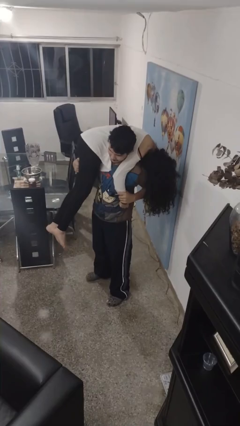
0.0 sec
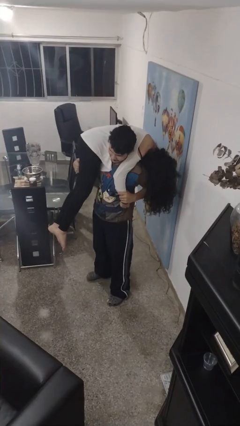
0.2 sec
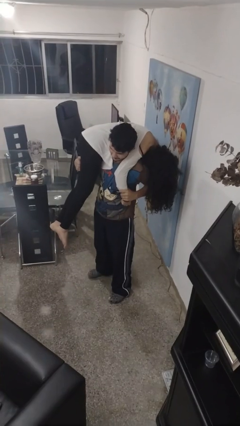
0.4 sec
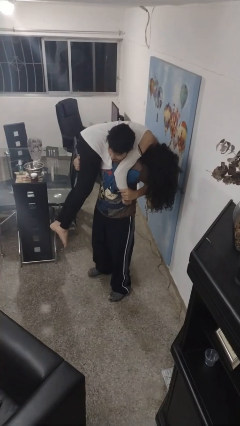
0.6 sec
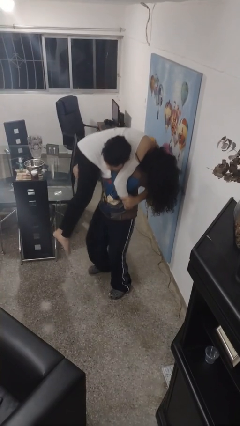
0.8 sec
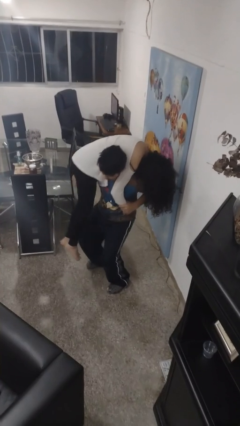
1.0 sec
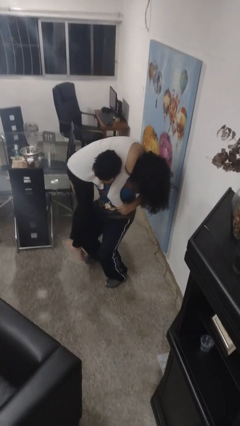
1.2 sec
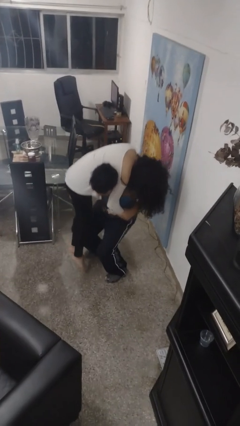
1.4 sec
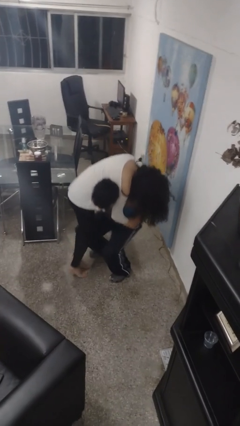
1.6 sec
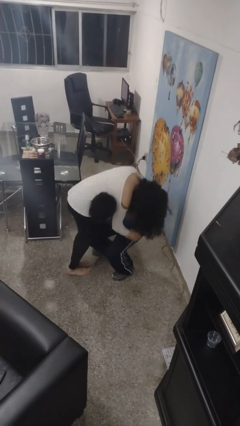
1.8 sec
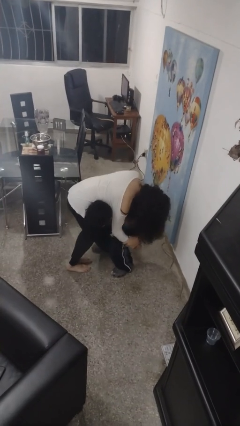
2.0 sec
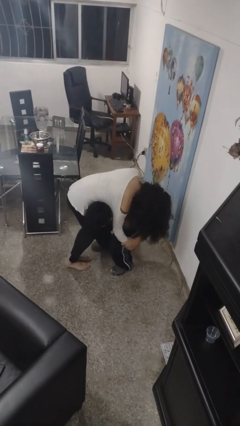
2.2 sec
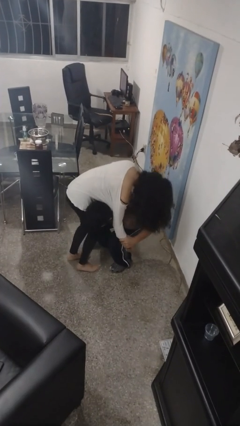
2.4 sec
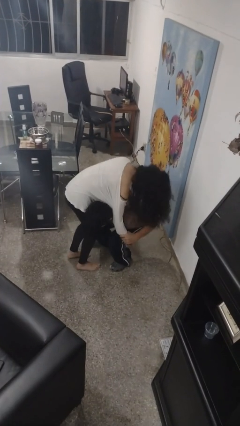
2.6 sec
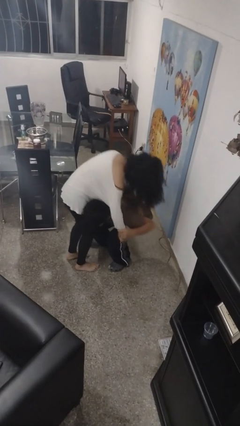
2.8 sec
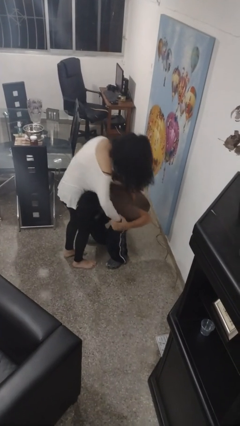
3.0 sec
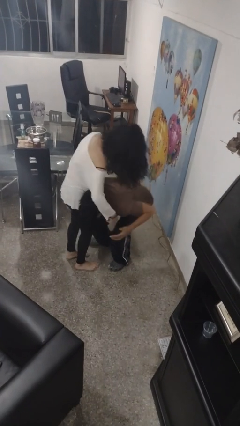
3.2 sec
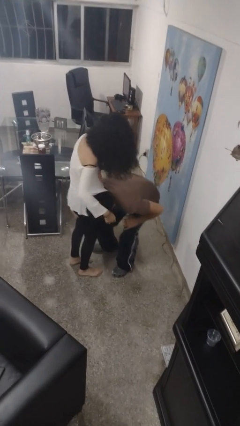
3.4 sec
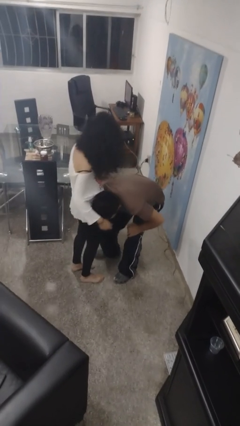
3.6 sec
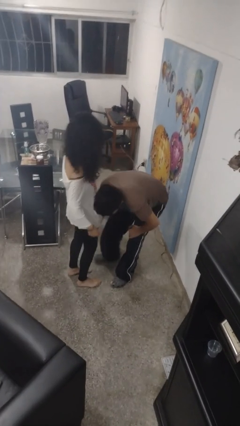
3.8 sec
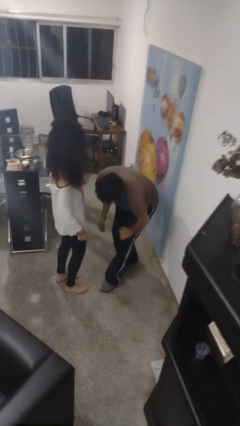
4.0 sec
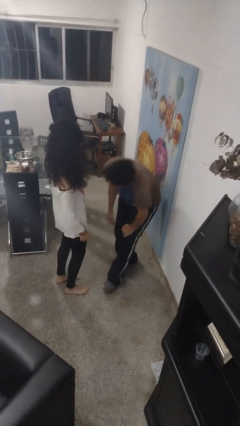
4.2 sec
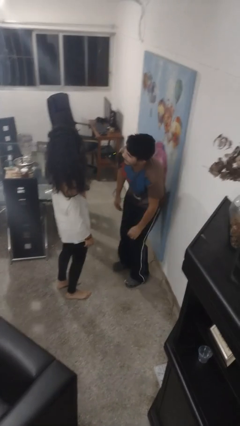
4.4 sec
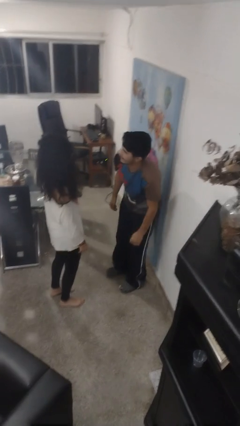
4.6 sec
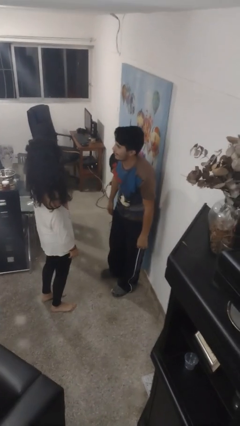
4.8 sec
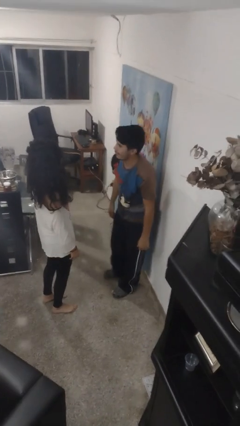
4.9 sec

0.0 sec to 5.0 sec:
person puts down person

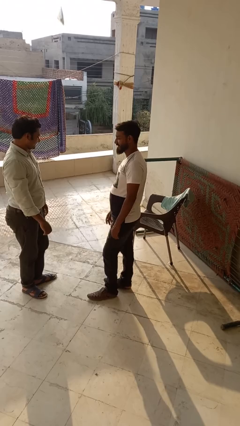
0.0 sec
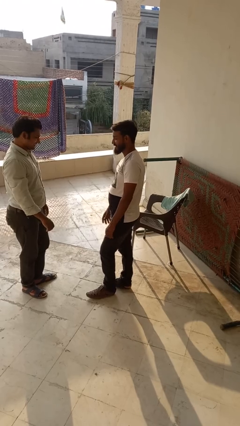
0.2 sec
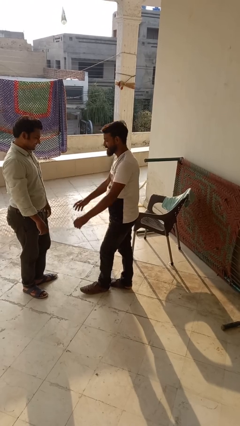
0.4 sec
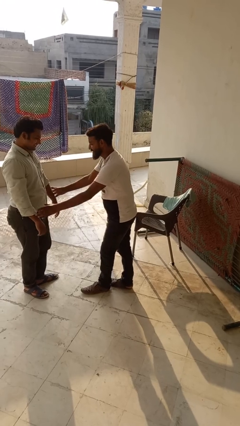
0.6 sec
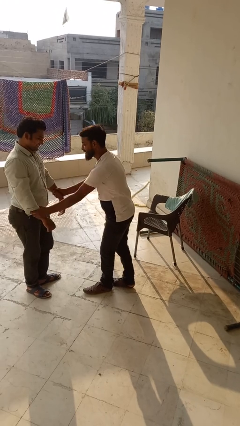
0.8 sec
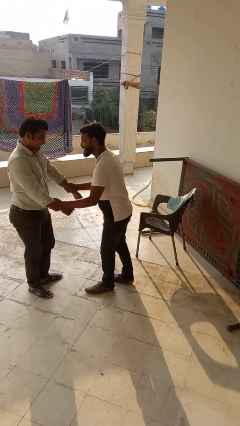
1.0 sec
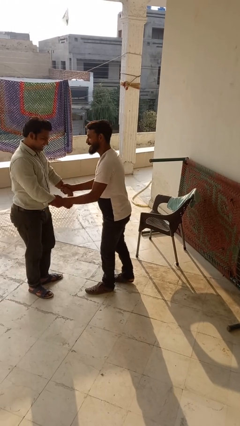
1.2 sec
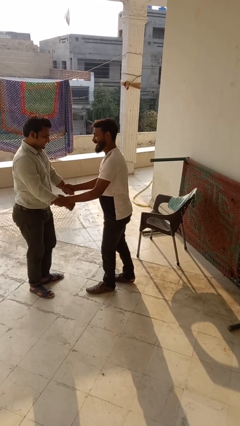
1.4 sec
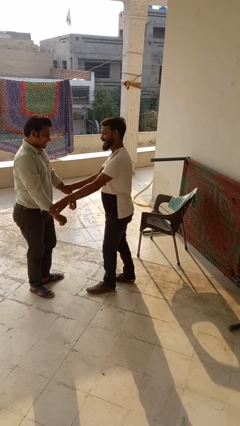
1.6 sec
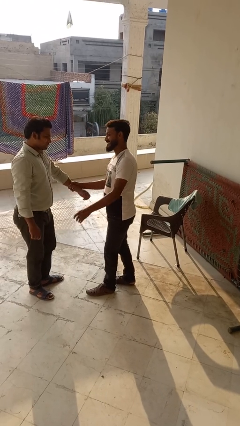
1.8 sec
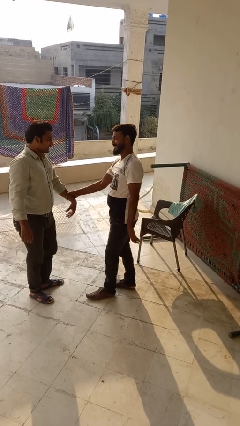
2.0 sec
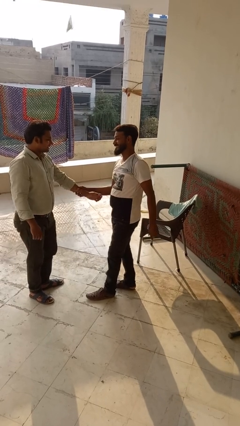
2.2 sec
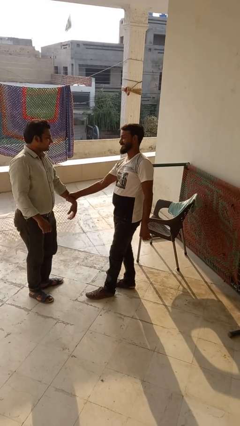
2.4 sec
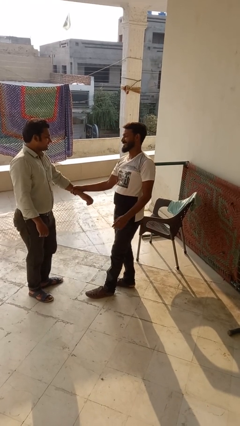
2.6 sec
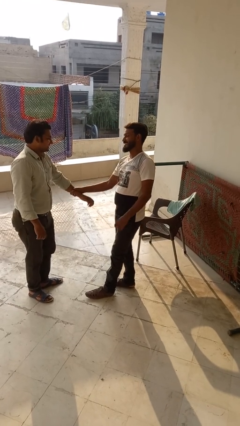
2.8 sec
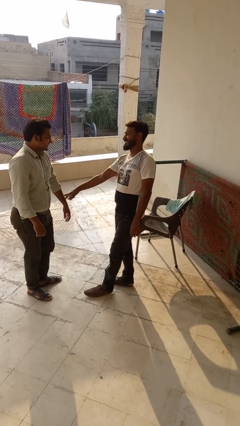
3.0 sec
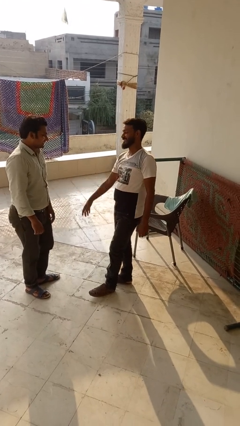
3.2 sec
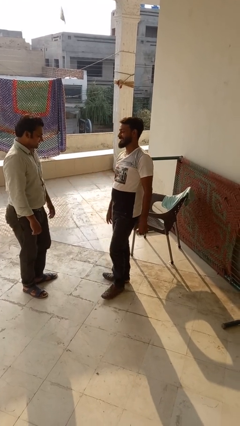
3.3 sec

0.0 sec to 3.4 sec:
person grabs person by forearm

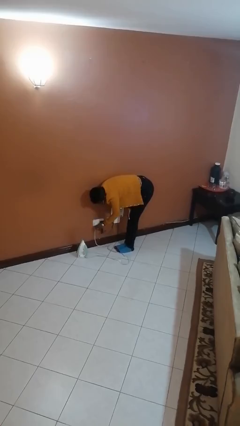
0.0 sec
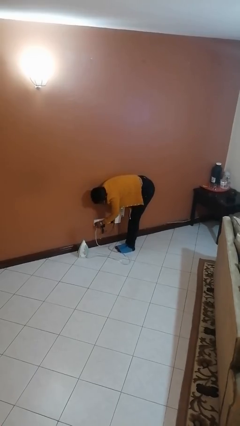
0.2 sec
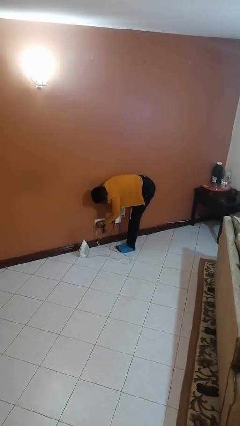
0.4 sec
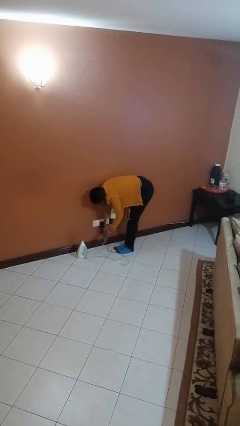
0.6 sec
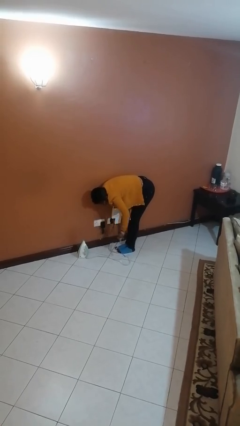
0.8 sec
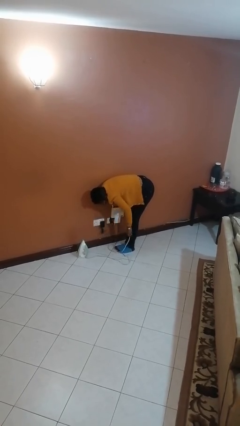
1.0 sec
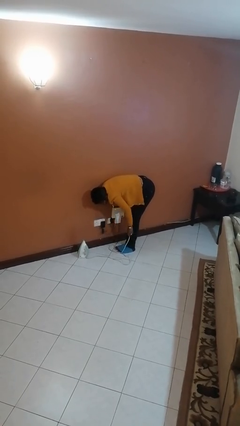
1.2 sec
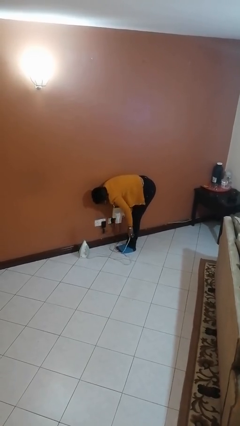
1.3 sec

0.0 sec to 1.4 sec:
person unplugs from electrical socket

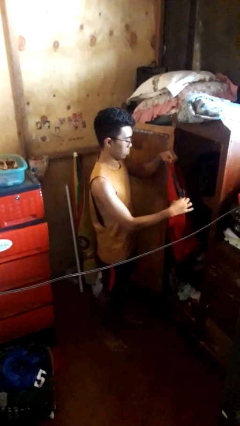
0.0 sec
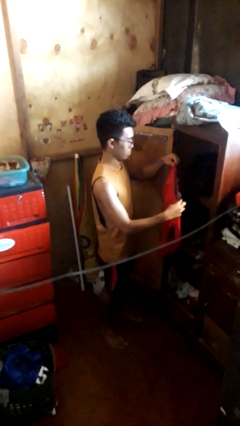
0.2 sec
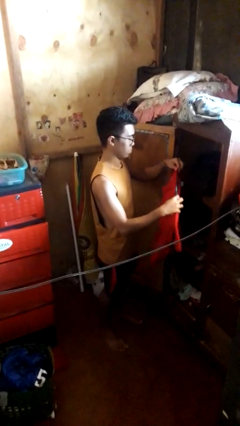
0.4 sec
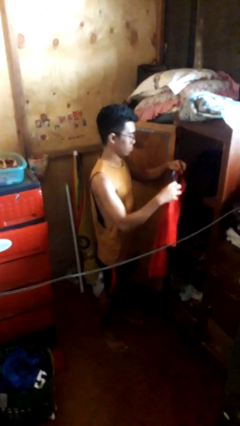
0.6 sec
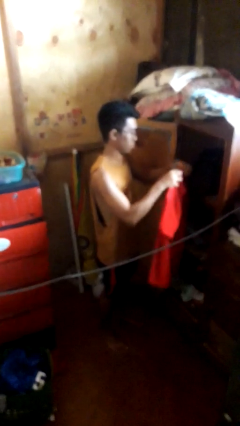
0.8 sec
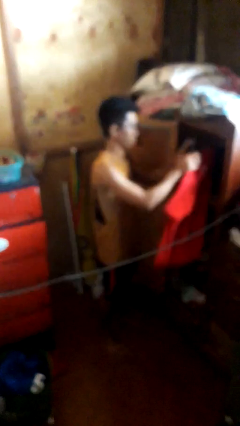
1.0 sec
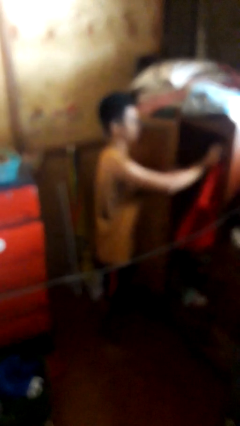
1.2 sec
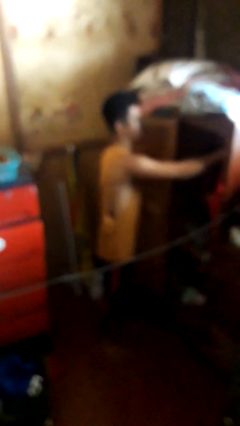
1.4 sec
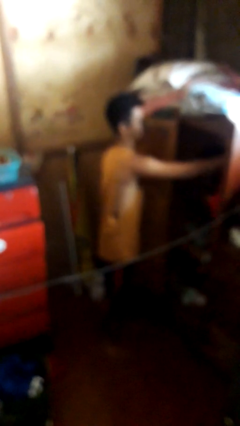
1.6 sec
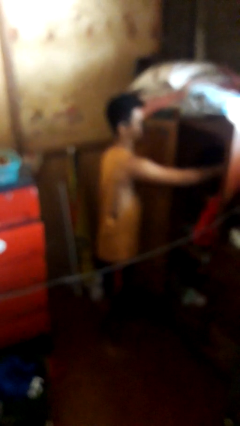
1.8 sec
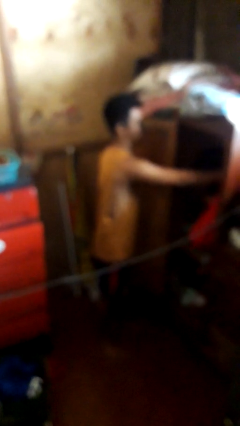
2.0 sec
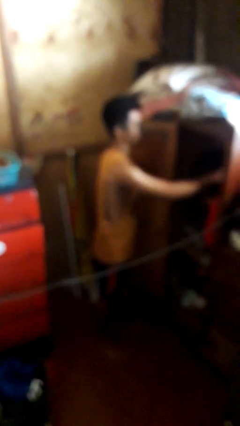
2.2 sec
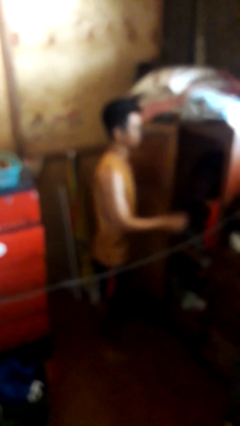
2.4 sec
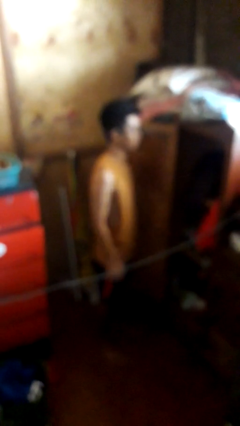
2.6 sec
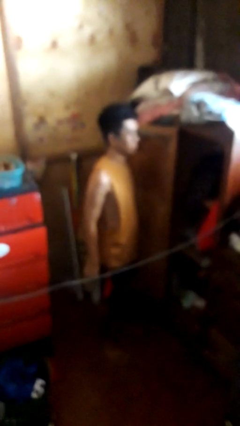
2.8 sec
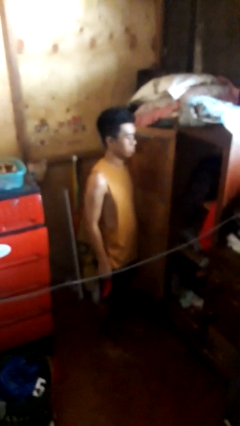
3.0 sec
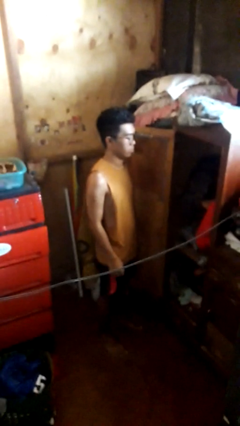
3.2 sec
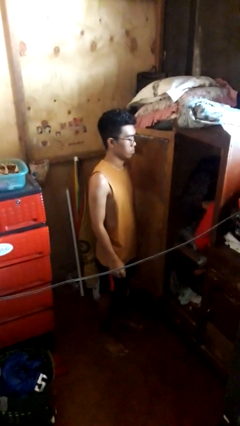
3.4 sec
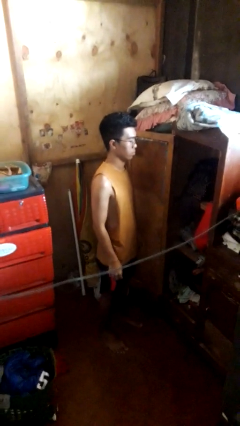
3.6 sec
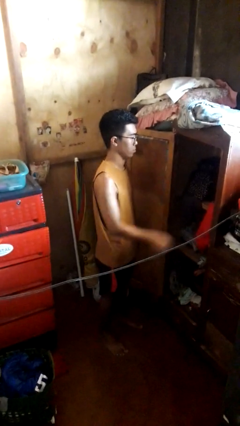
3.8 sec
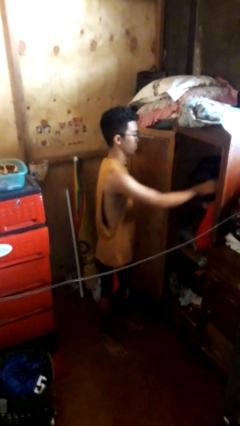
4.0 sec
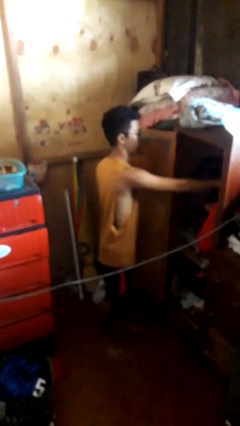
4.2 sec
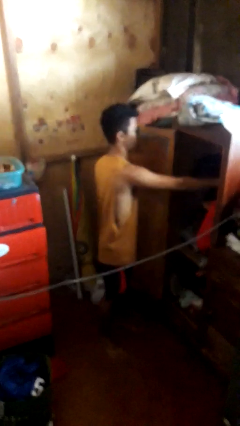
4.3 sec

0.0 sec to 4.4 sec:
person puts clothes into closet

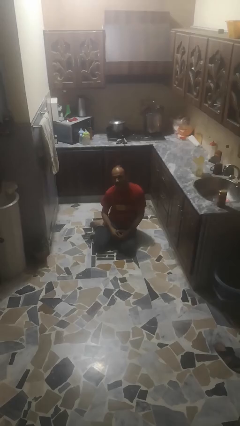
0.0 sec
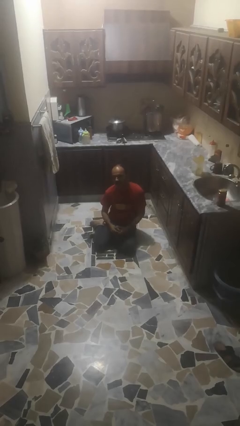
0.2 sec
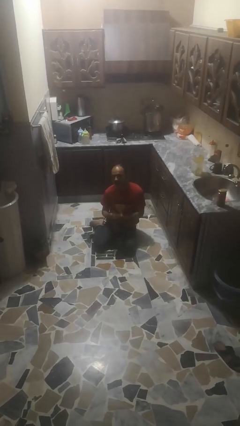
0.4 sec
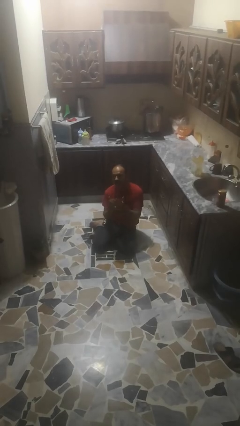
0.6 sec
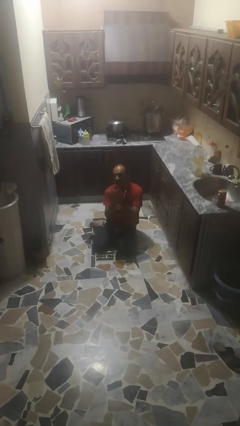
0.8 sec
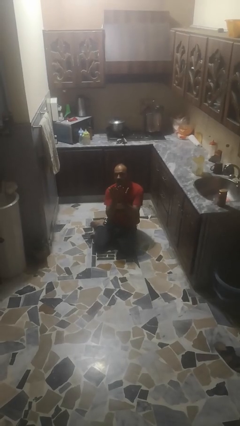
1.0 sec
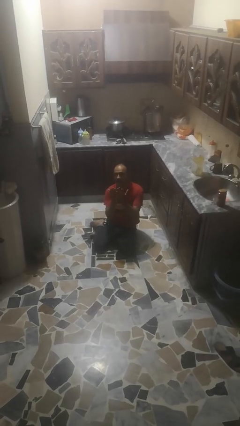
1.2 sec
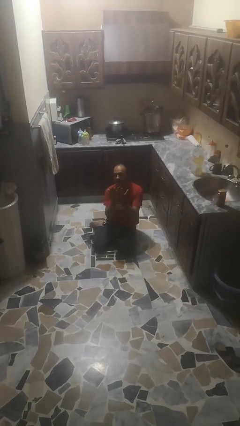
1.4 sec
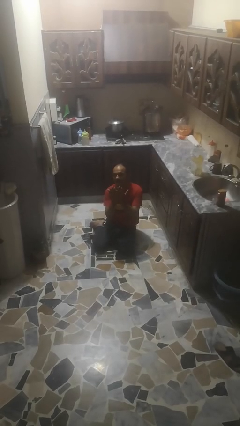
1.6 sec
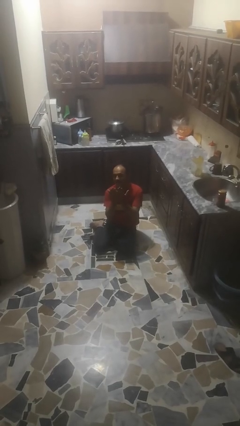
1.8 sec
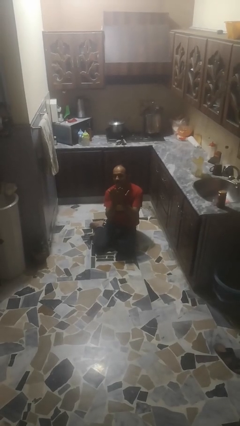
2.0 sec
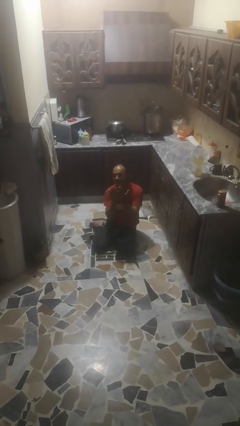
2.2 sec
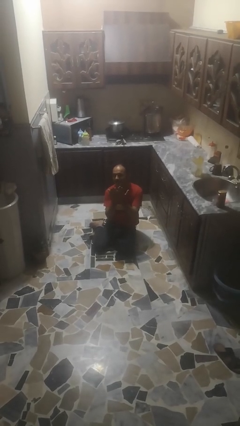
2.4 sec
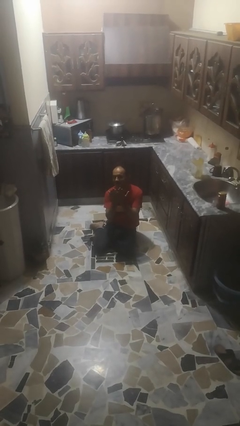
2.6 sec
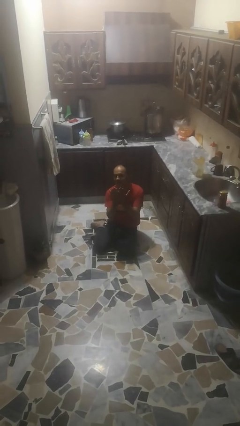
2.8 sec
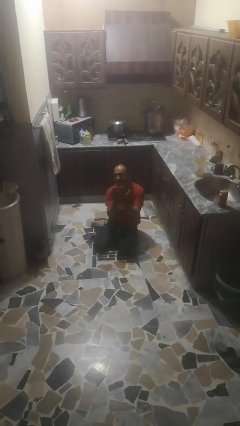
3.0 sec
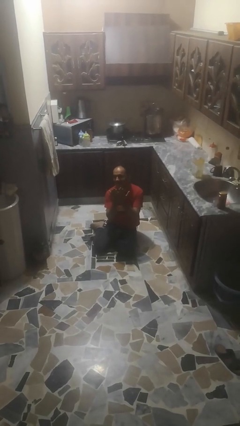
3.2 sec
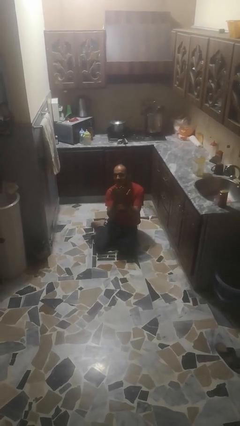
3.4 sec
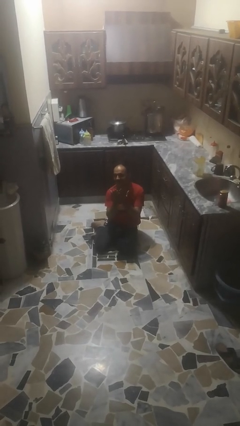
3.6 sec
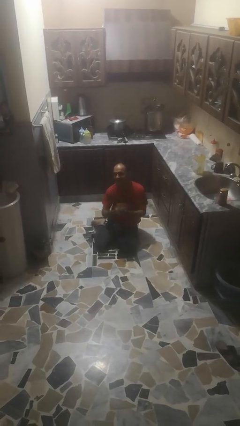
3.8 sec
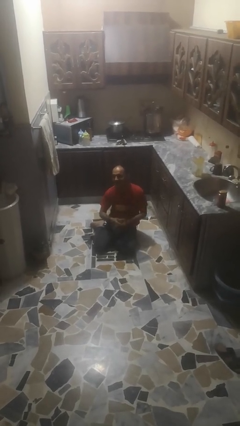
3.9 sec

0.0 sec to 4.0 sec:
person prays
